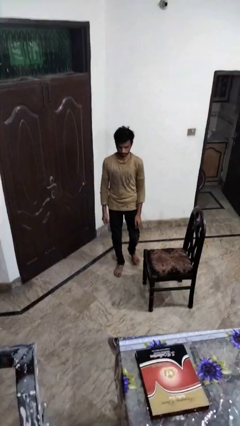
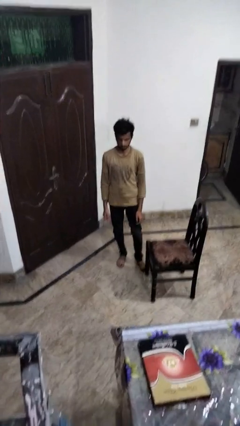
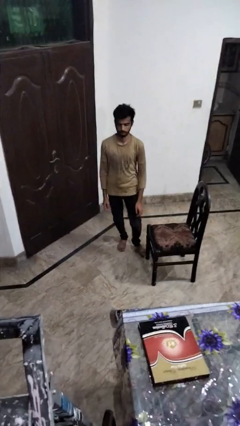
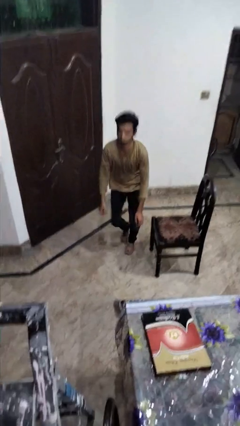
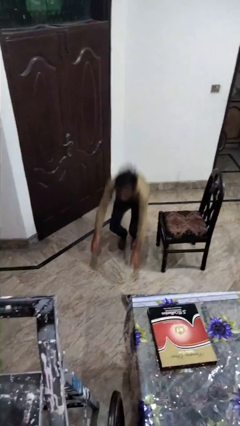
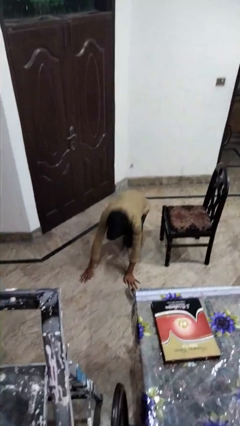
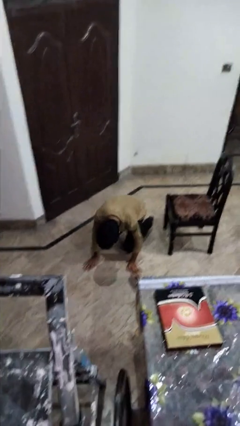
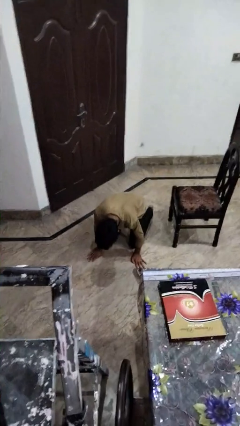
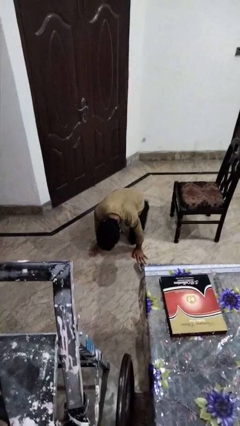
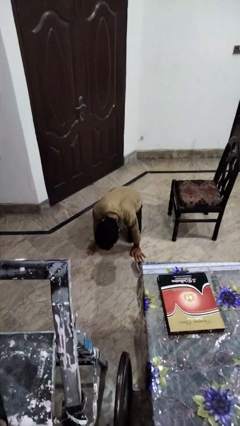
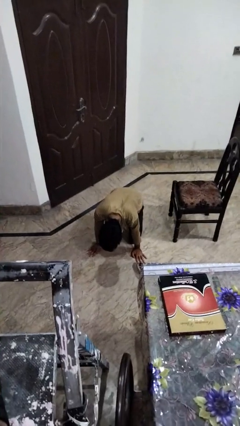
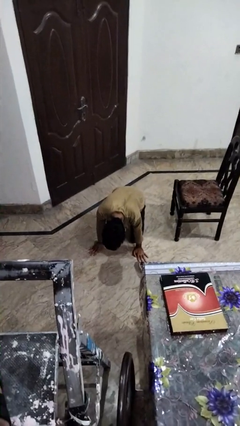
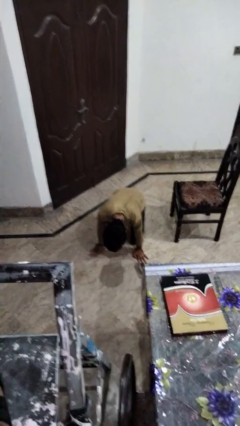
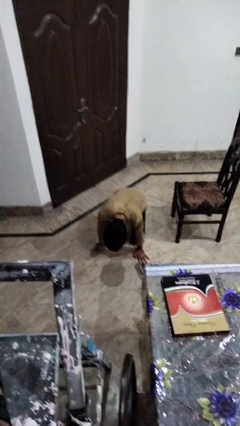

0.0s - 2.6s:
person trips on object on floor

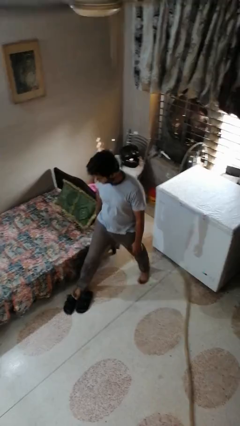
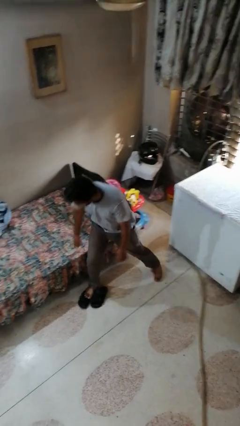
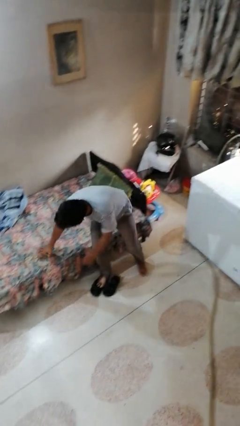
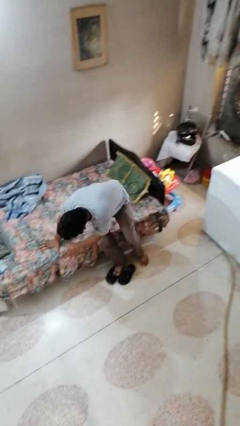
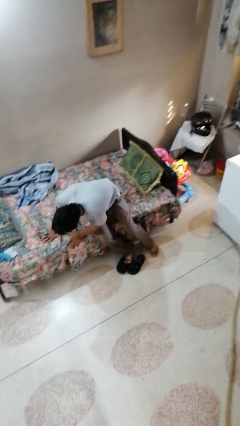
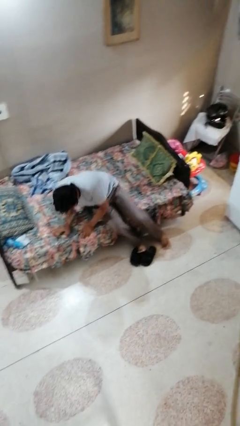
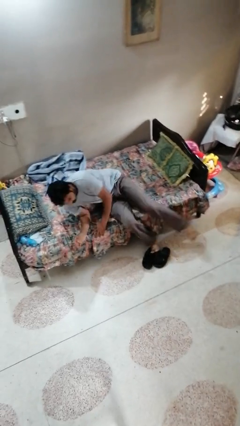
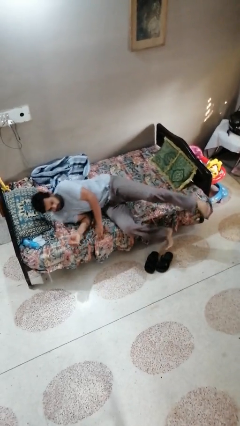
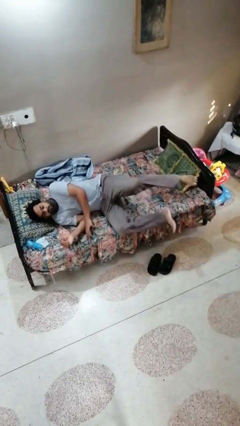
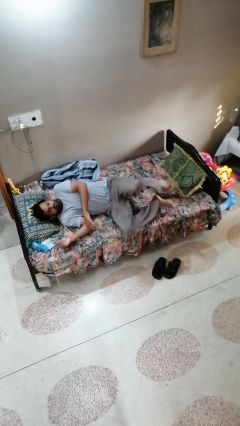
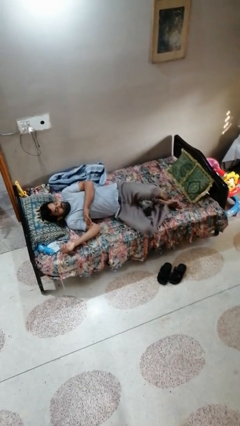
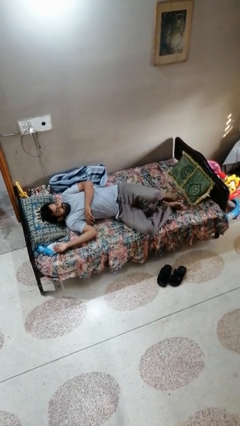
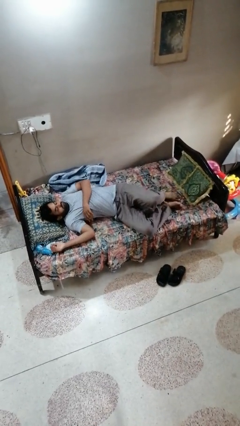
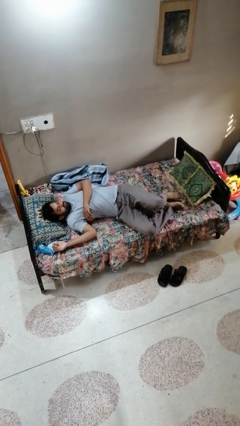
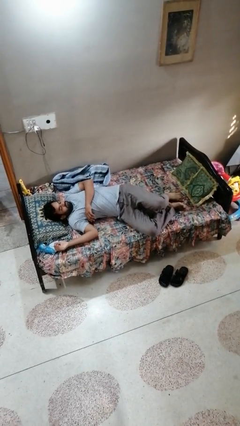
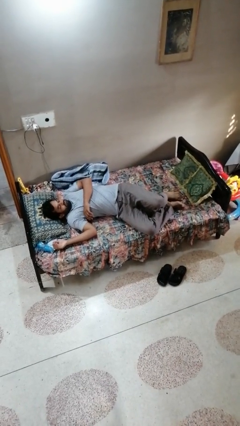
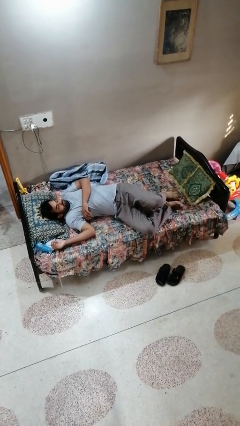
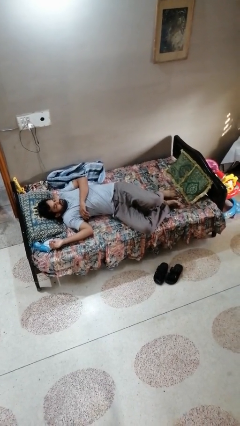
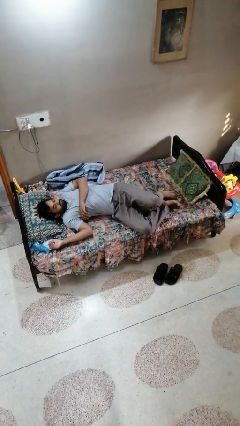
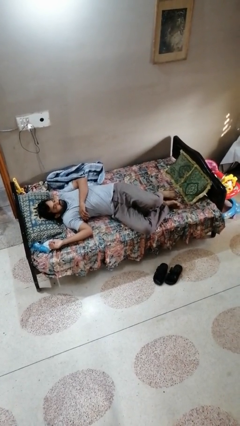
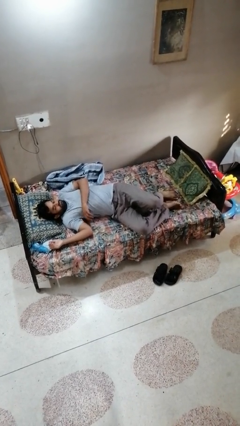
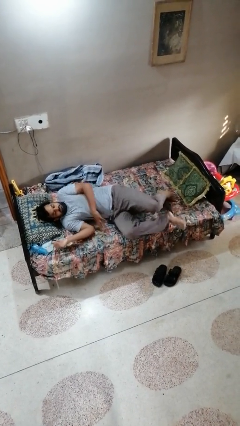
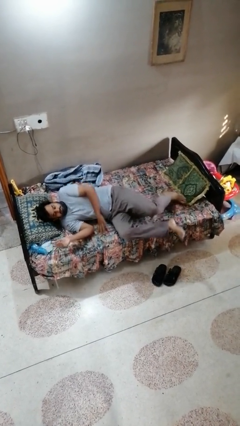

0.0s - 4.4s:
person lies down on bed

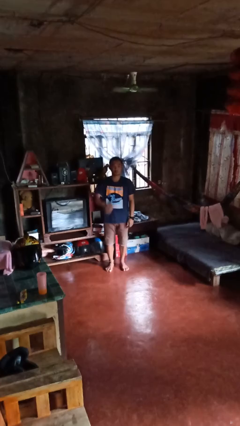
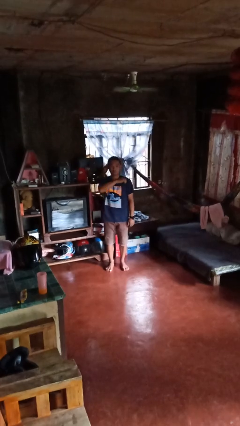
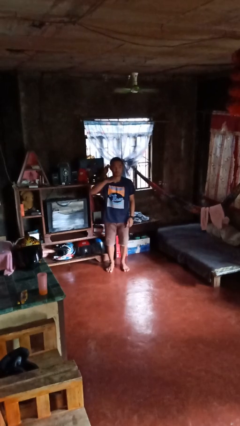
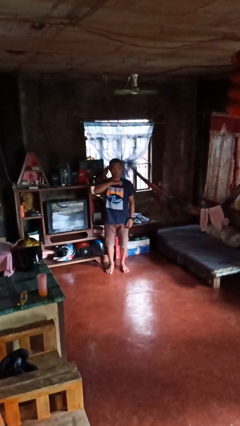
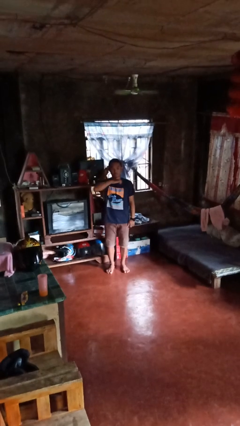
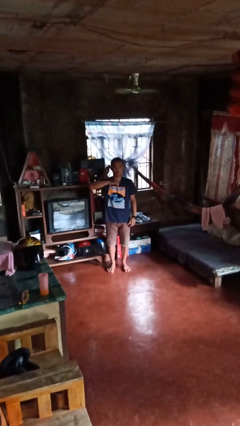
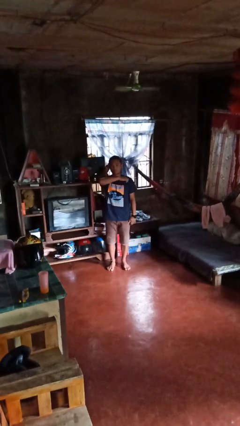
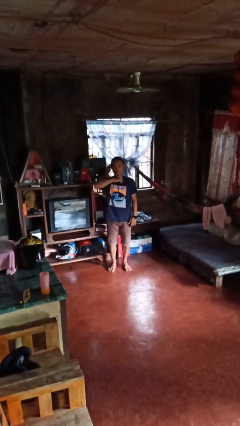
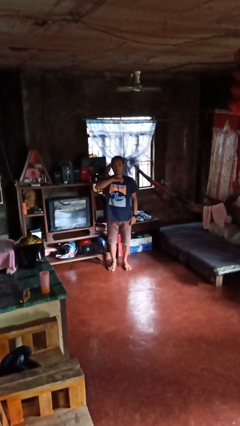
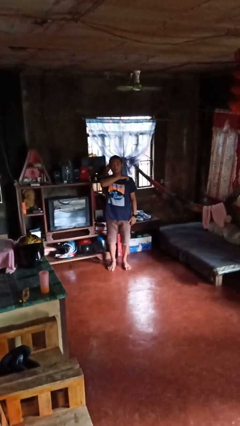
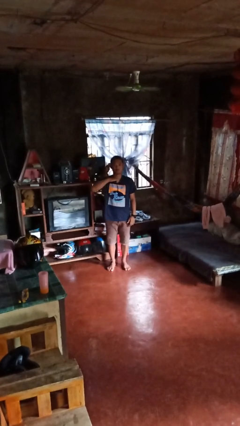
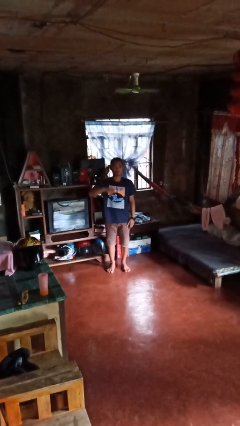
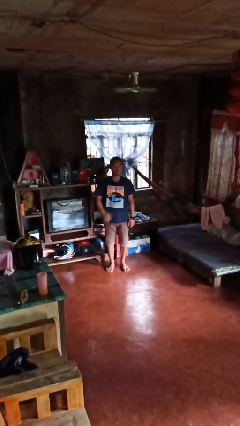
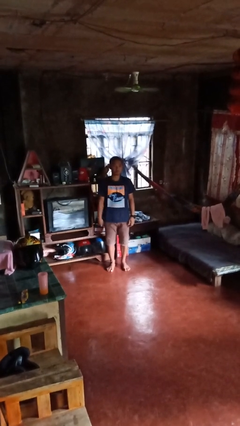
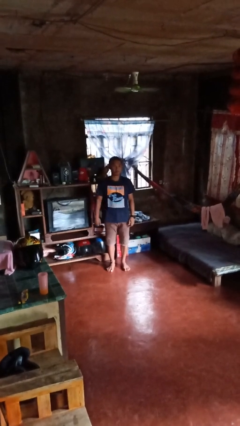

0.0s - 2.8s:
person gestures cut

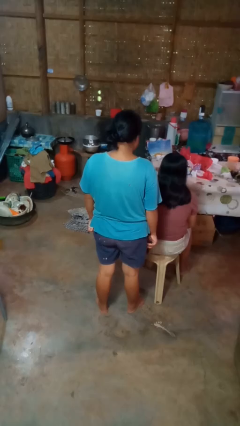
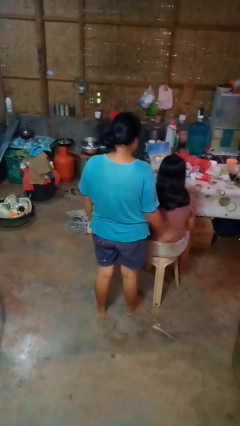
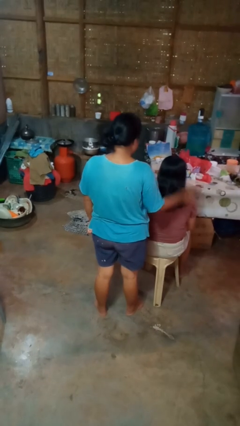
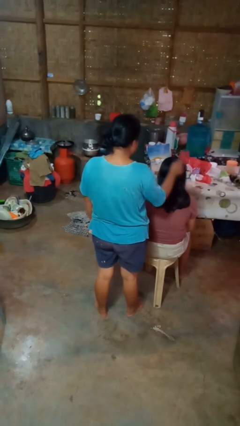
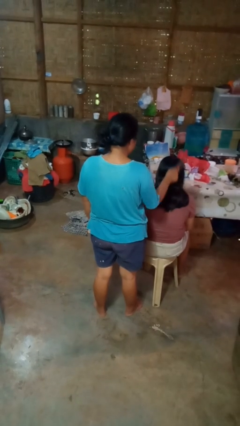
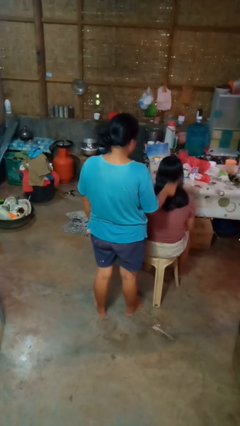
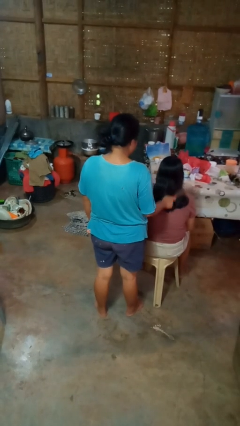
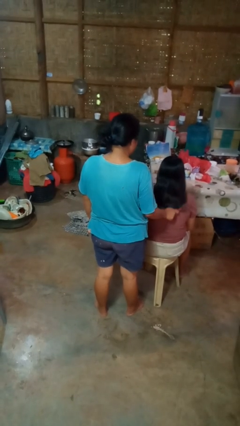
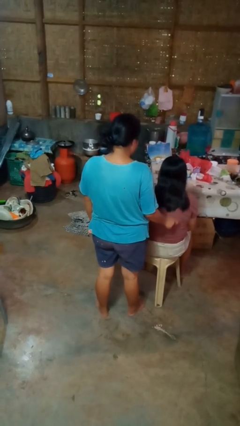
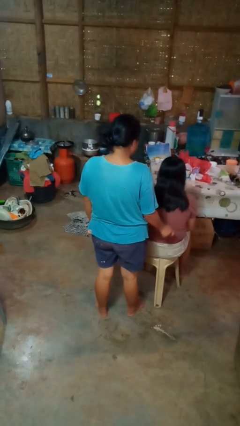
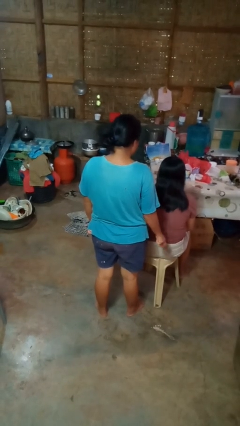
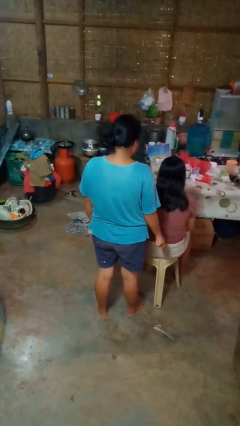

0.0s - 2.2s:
person brushes hair of person

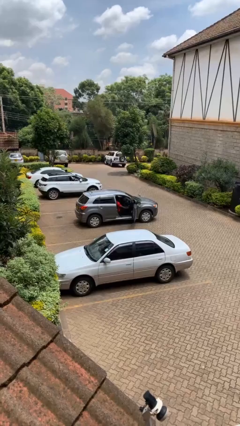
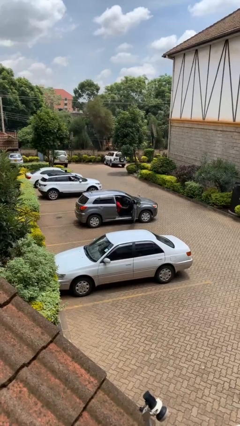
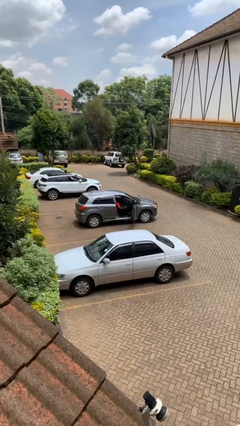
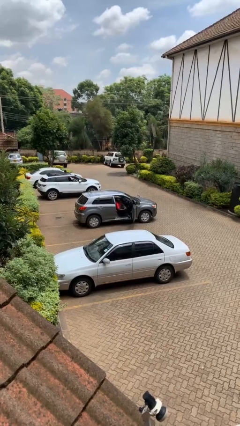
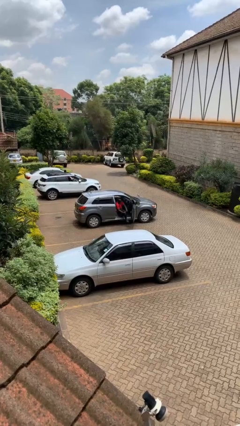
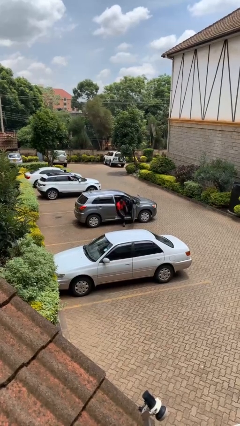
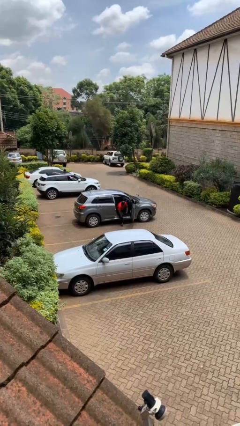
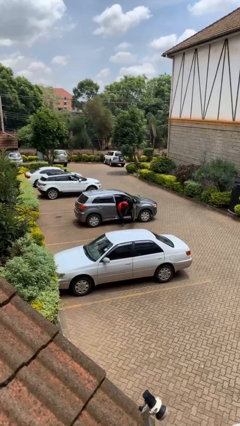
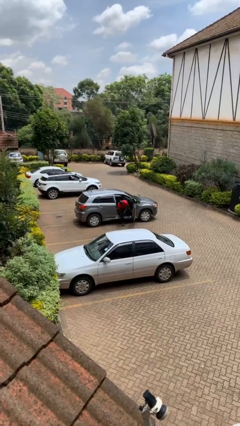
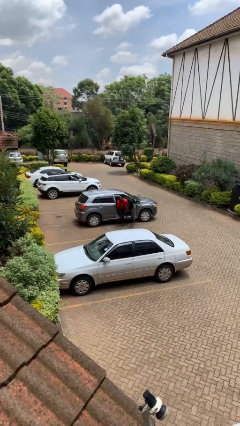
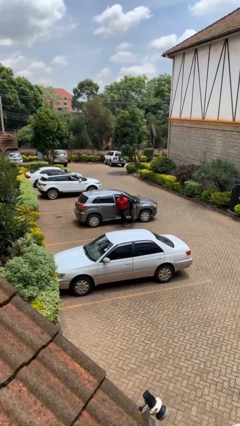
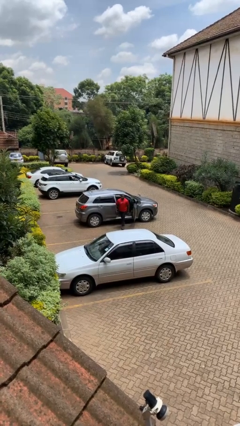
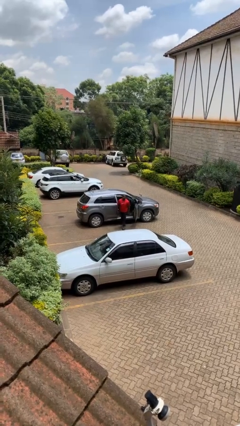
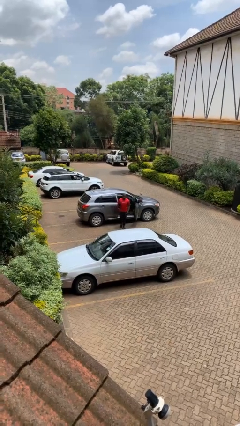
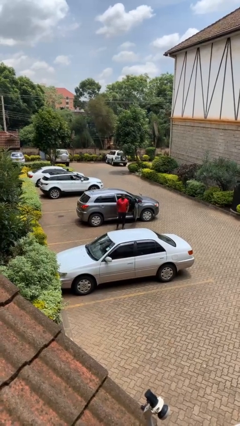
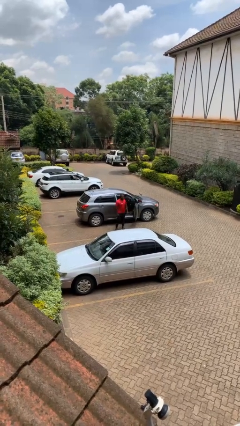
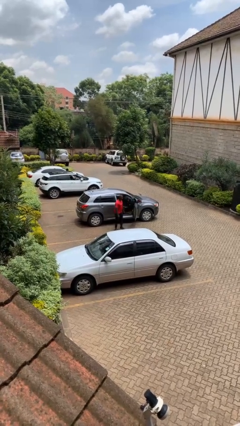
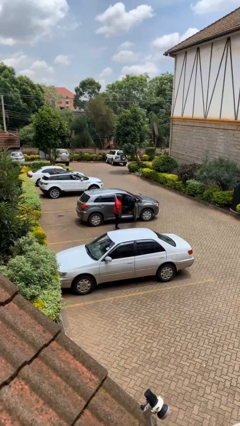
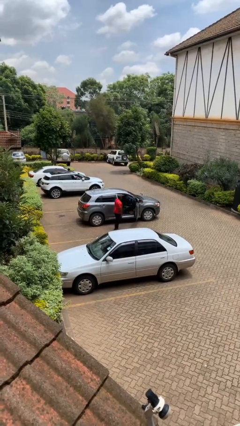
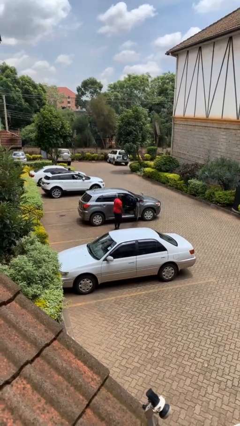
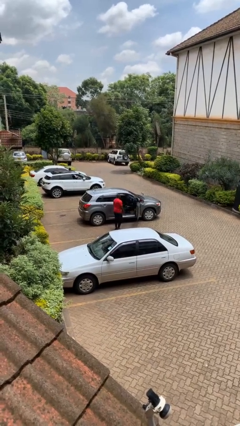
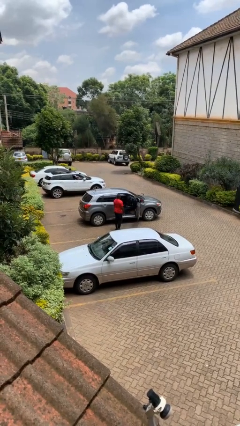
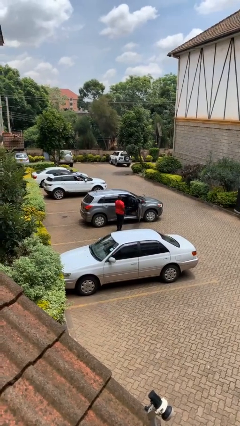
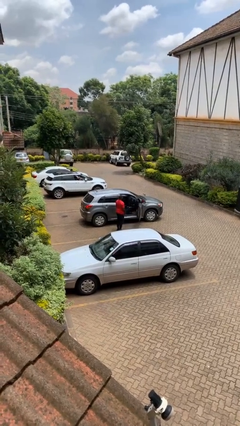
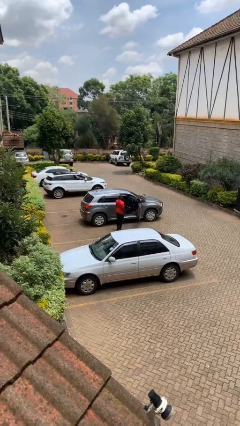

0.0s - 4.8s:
person exits car

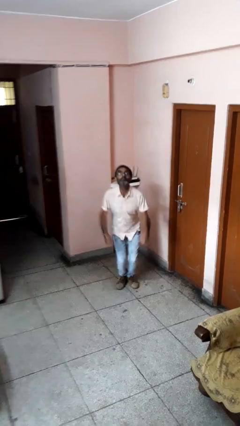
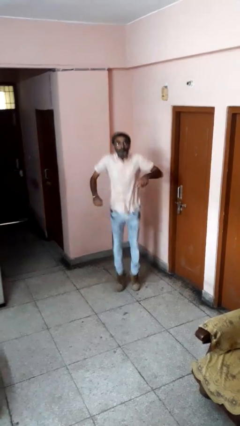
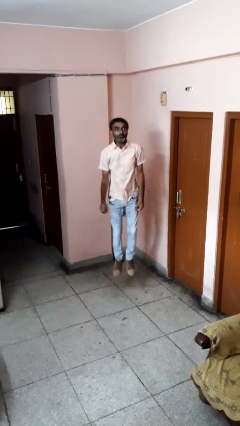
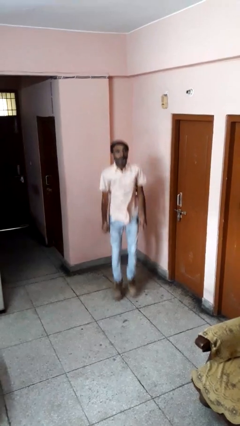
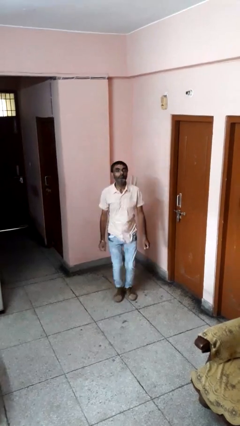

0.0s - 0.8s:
person jumps
